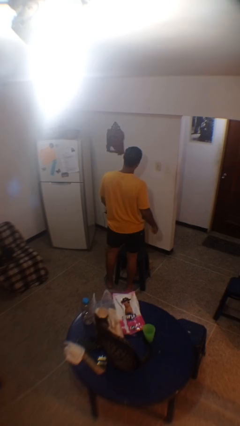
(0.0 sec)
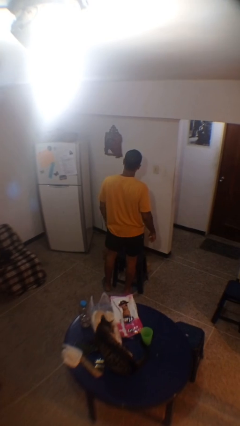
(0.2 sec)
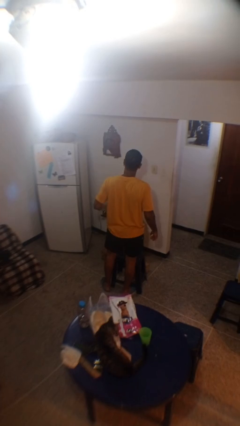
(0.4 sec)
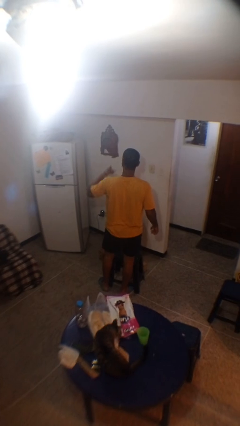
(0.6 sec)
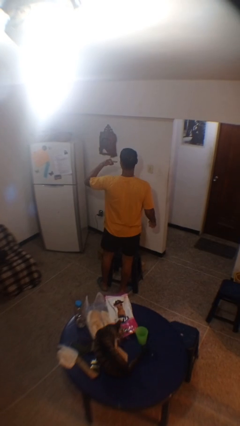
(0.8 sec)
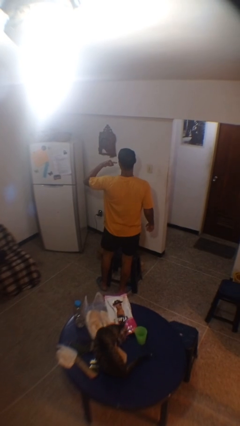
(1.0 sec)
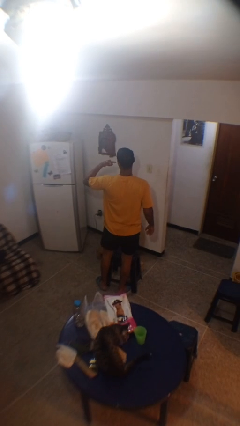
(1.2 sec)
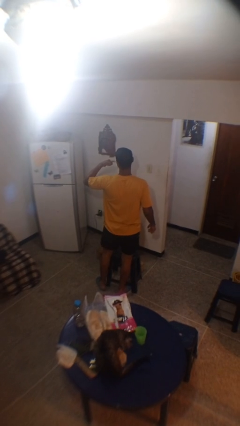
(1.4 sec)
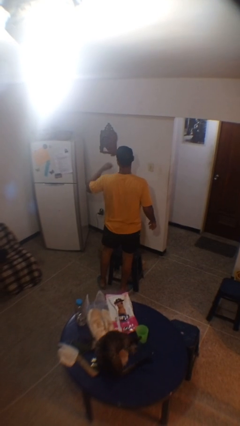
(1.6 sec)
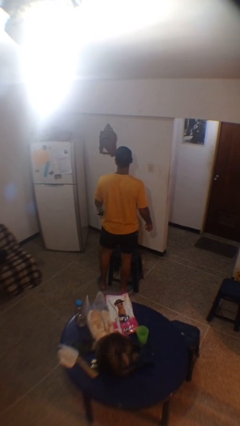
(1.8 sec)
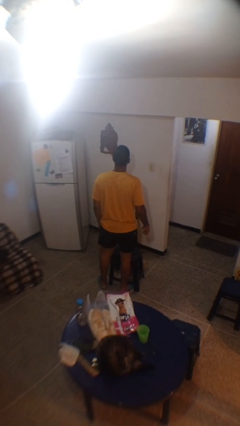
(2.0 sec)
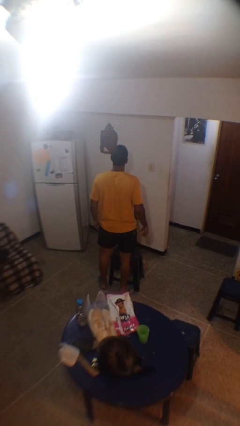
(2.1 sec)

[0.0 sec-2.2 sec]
person gestures call me

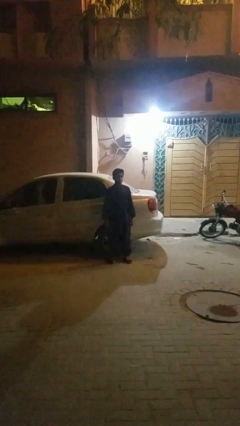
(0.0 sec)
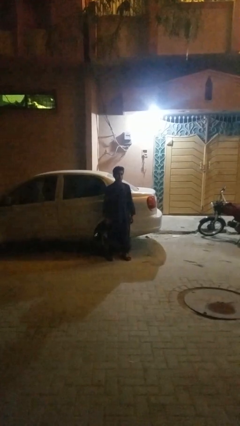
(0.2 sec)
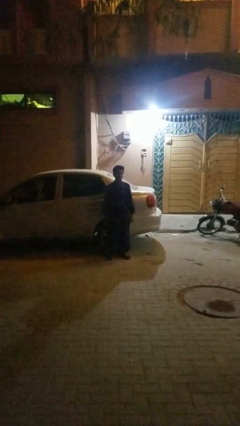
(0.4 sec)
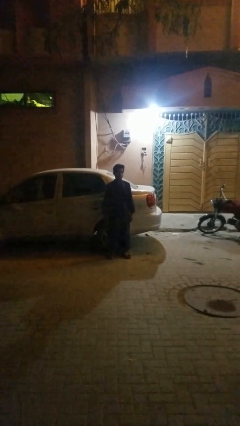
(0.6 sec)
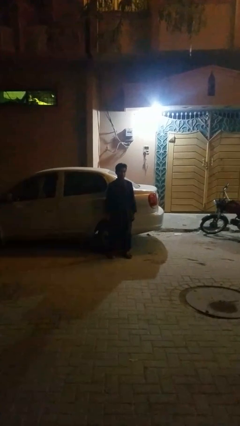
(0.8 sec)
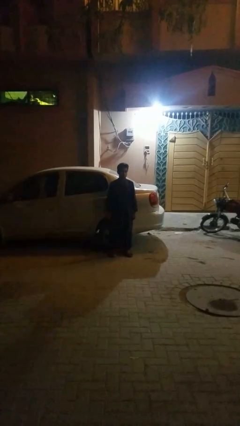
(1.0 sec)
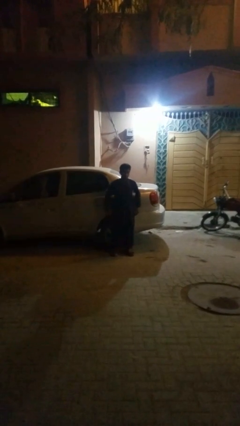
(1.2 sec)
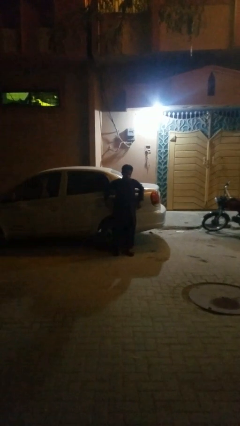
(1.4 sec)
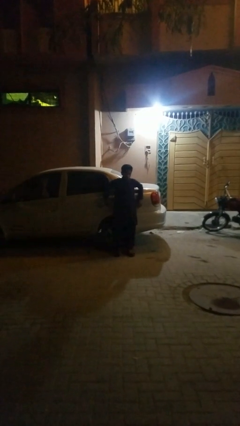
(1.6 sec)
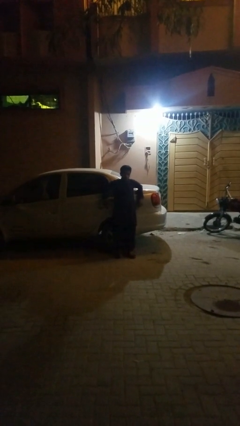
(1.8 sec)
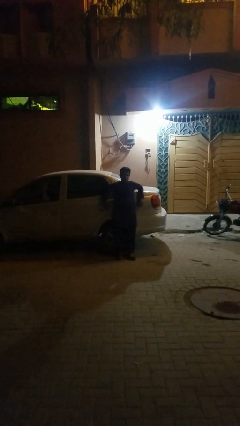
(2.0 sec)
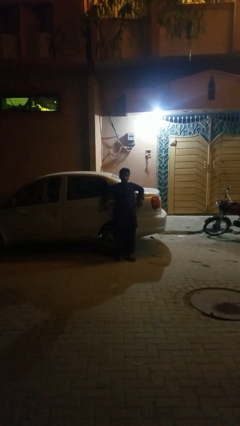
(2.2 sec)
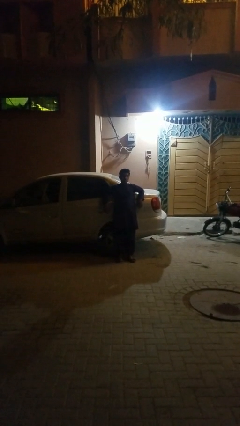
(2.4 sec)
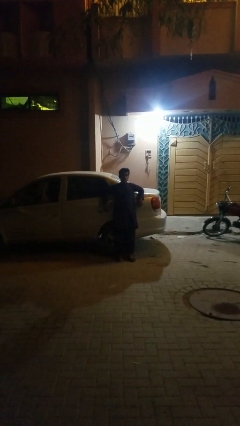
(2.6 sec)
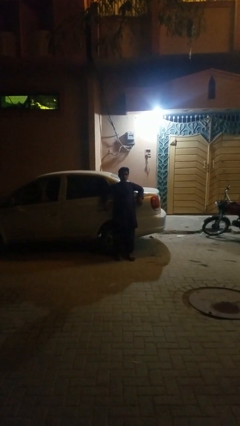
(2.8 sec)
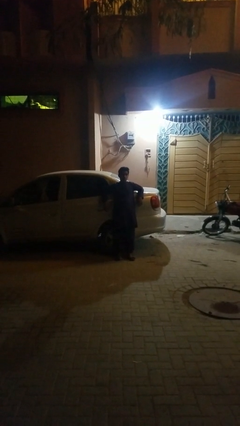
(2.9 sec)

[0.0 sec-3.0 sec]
person leans against car

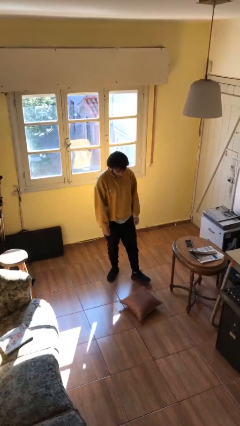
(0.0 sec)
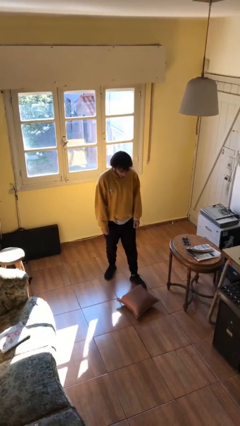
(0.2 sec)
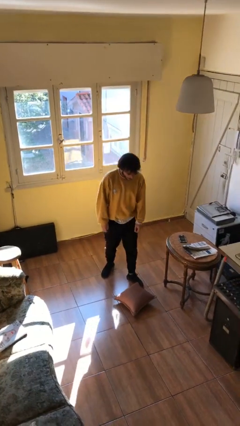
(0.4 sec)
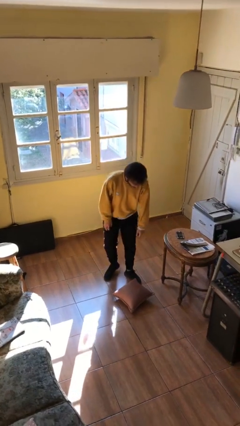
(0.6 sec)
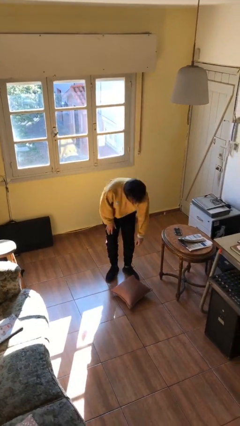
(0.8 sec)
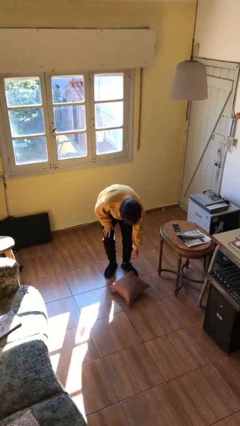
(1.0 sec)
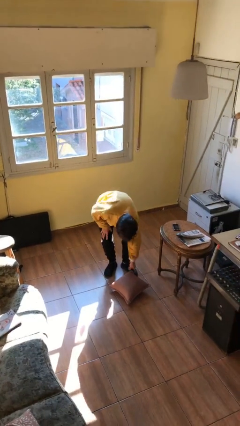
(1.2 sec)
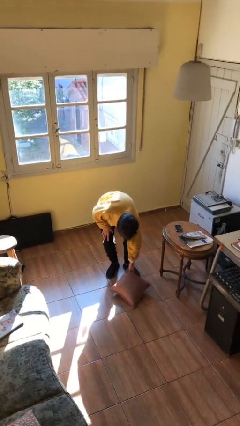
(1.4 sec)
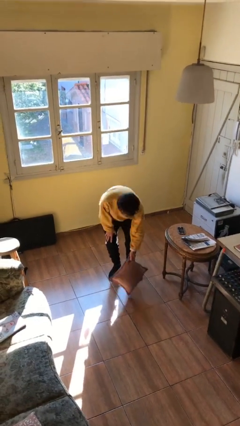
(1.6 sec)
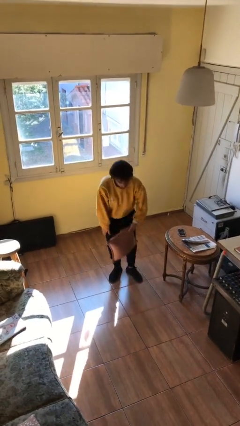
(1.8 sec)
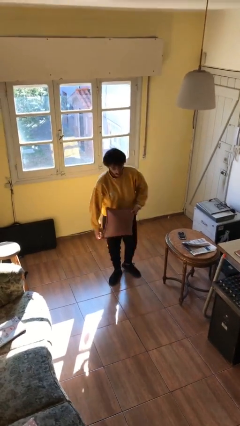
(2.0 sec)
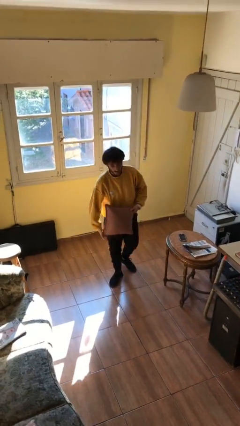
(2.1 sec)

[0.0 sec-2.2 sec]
person picks up object from floor

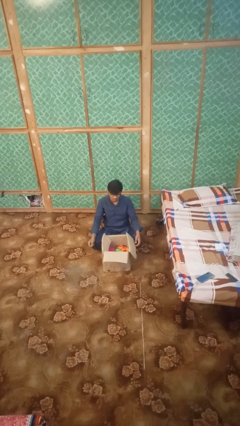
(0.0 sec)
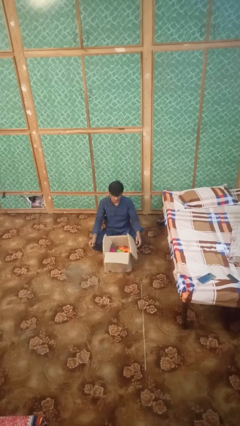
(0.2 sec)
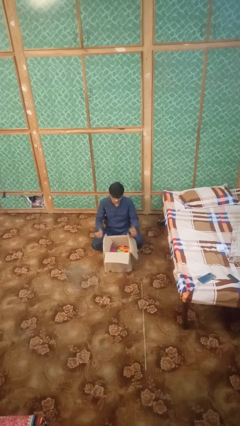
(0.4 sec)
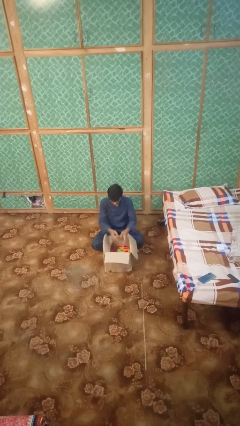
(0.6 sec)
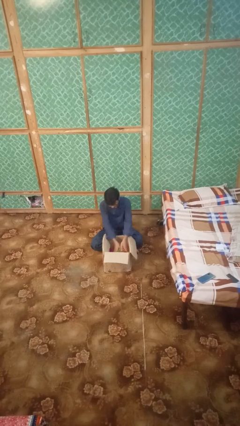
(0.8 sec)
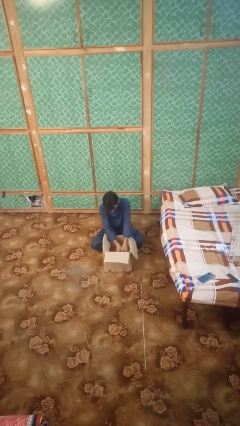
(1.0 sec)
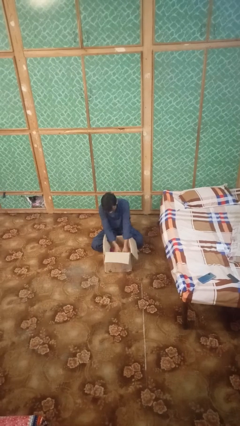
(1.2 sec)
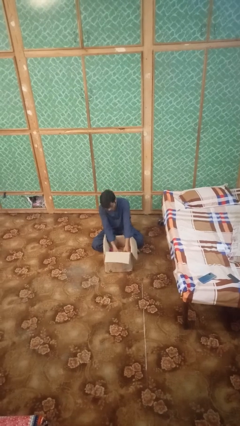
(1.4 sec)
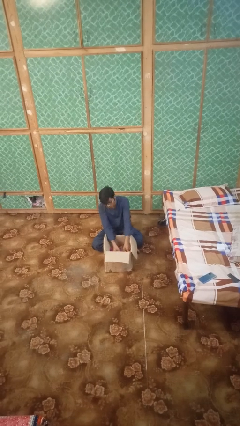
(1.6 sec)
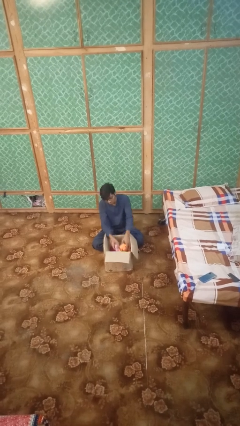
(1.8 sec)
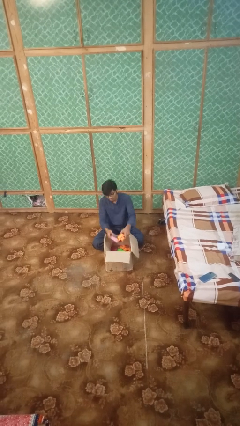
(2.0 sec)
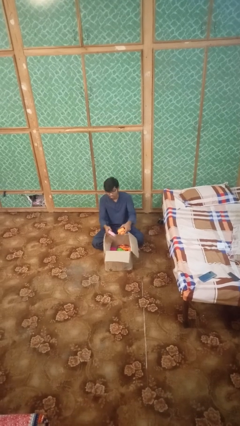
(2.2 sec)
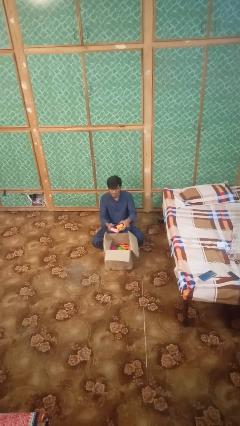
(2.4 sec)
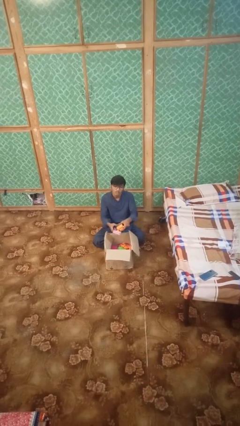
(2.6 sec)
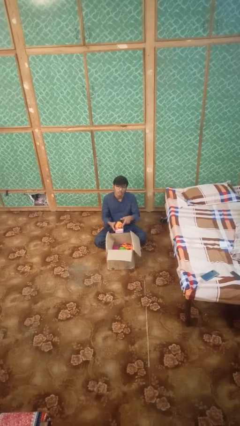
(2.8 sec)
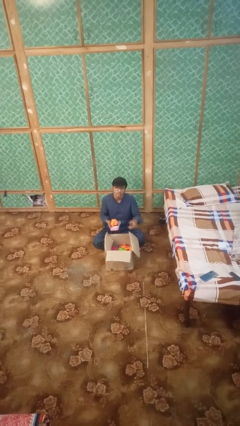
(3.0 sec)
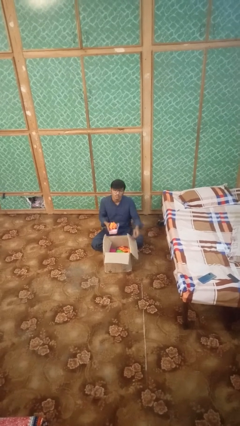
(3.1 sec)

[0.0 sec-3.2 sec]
person takes object from box

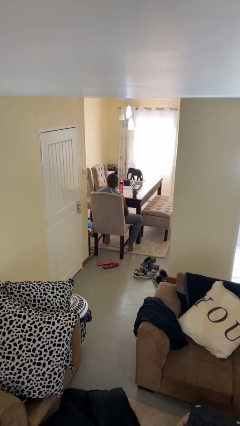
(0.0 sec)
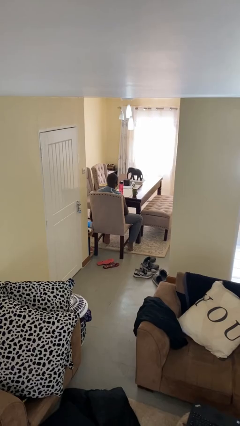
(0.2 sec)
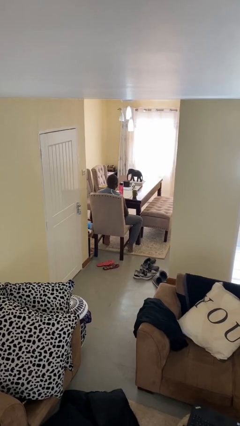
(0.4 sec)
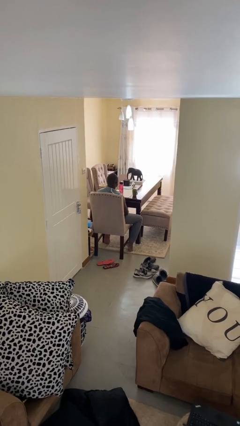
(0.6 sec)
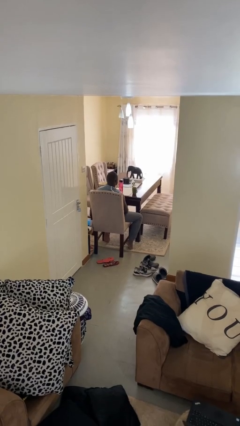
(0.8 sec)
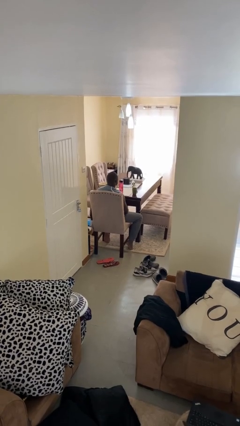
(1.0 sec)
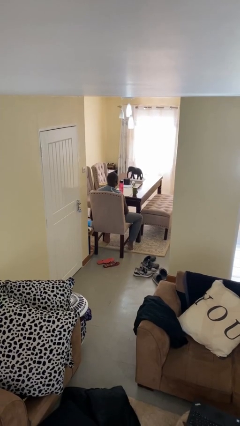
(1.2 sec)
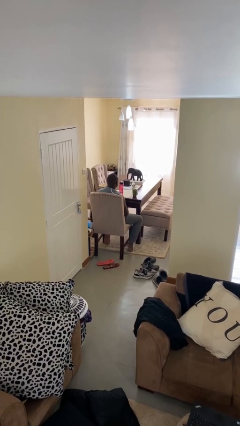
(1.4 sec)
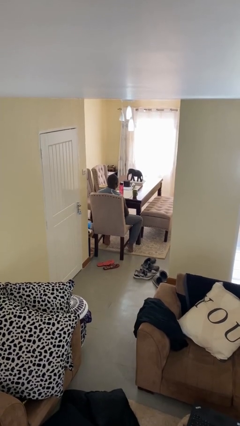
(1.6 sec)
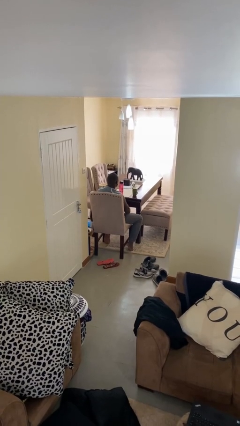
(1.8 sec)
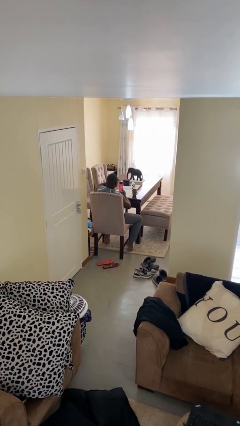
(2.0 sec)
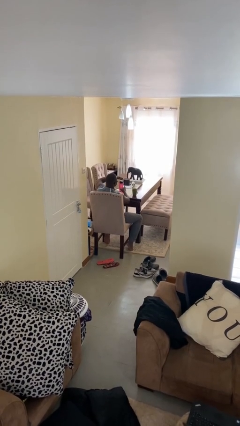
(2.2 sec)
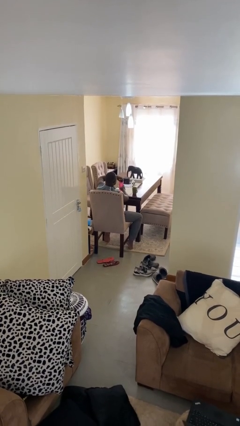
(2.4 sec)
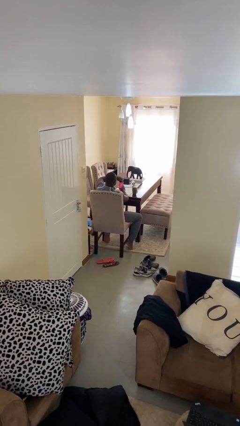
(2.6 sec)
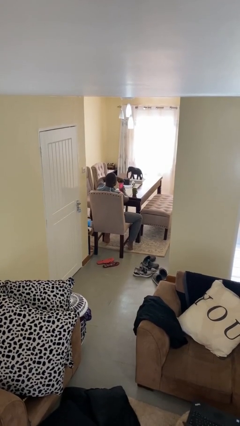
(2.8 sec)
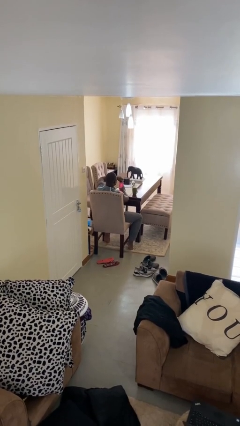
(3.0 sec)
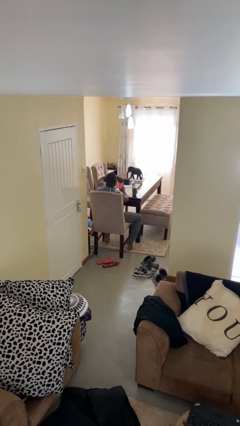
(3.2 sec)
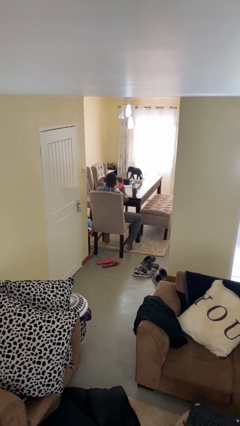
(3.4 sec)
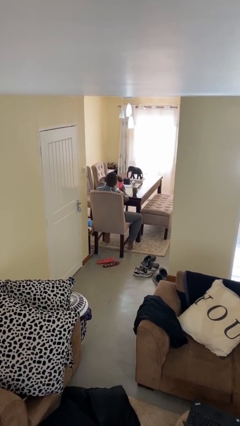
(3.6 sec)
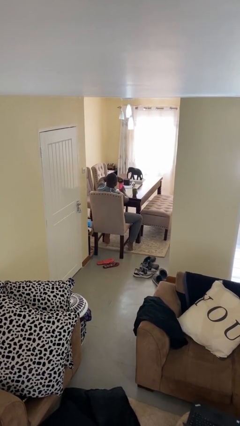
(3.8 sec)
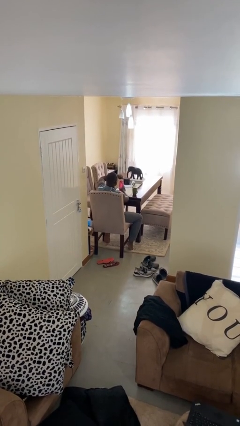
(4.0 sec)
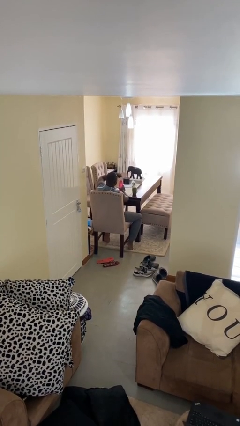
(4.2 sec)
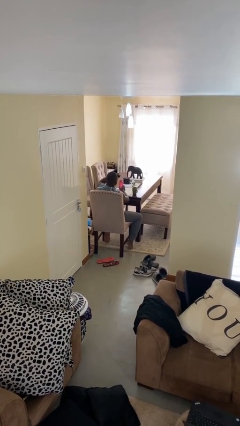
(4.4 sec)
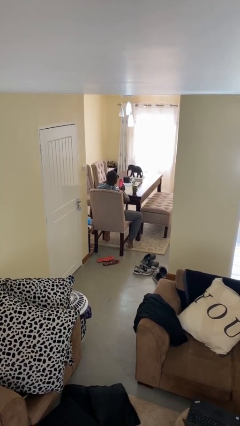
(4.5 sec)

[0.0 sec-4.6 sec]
person unscrews lid from bottle

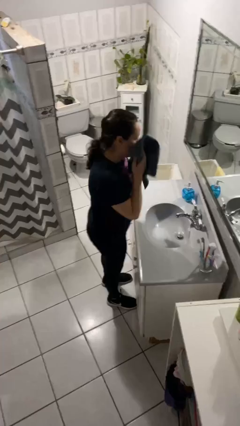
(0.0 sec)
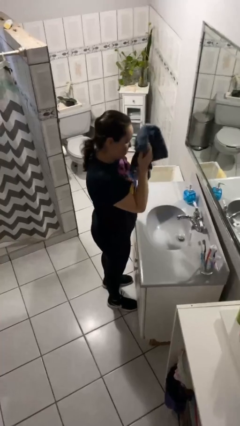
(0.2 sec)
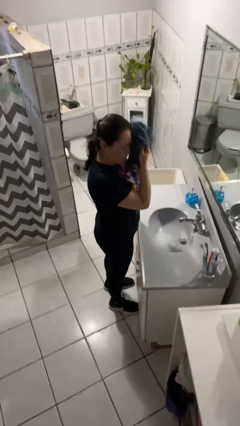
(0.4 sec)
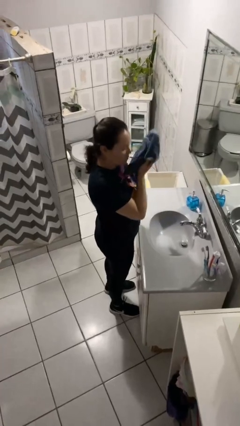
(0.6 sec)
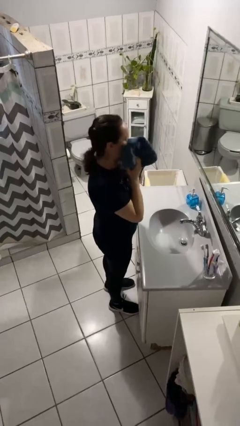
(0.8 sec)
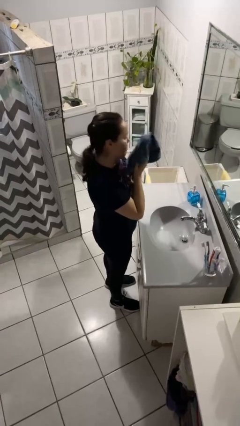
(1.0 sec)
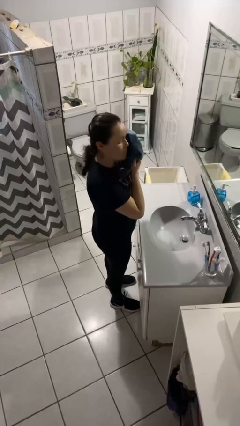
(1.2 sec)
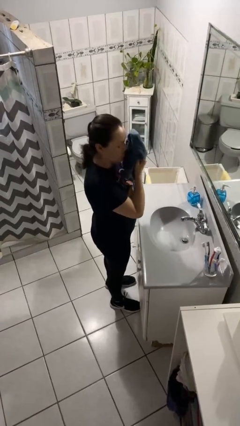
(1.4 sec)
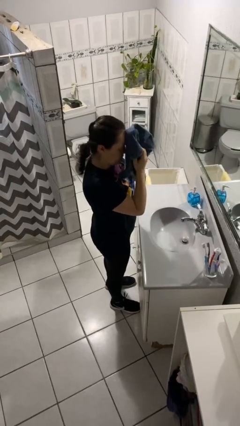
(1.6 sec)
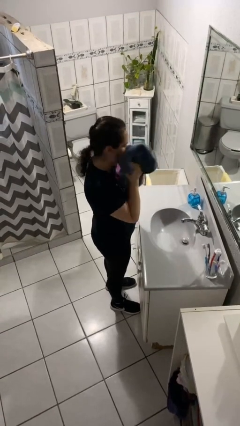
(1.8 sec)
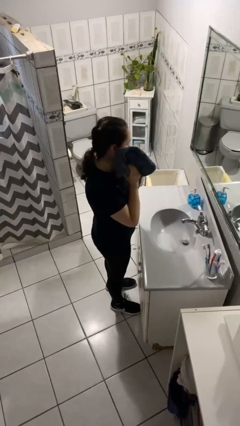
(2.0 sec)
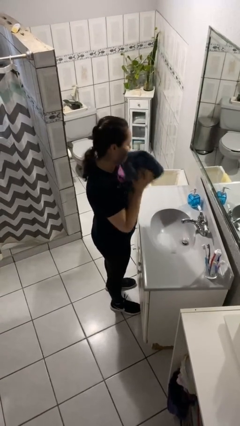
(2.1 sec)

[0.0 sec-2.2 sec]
person dries face with towel

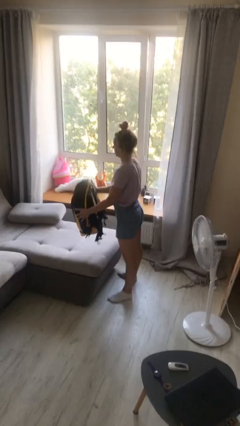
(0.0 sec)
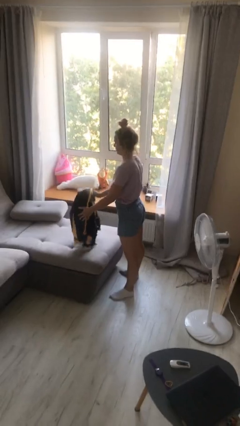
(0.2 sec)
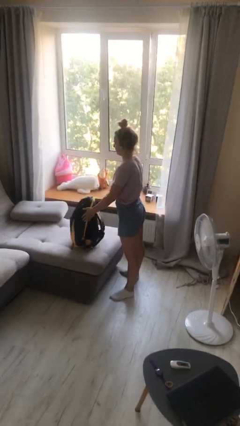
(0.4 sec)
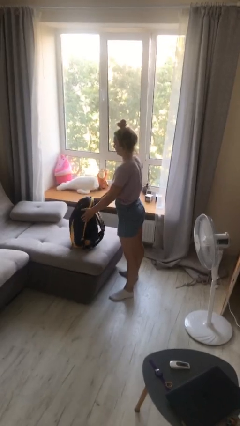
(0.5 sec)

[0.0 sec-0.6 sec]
person puts down object on bed
